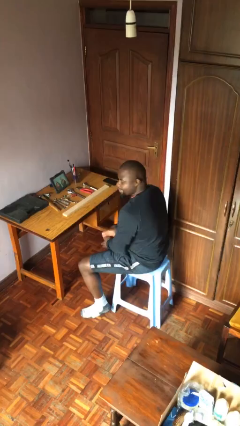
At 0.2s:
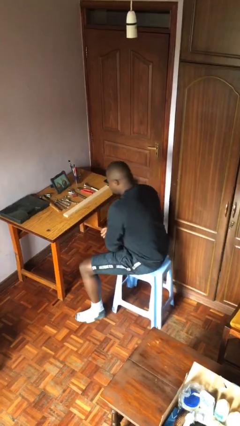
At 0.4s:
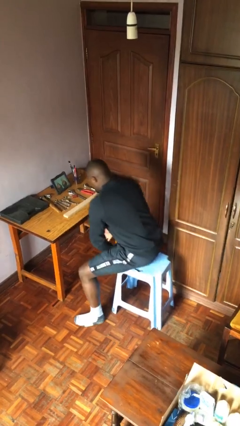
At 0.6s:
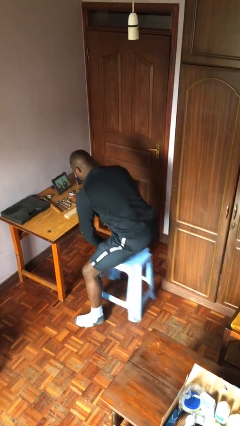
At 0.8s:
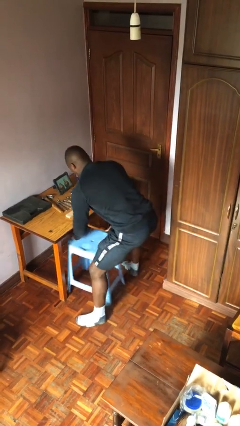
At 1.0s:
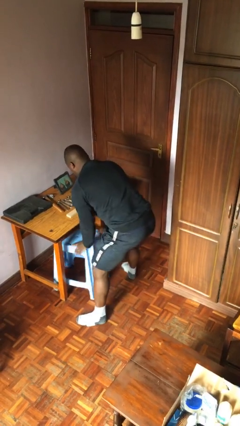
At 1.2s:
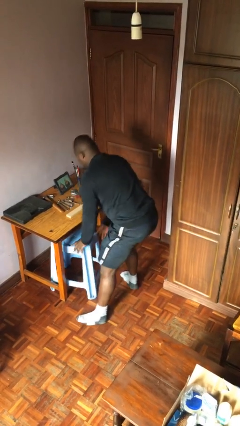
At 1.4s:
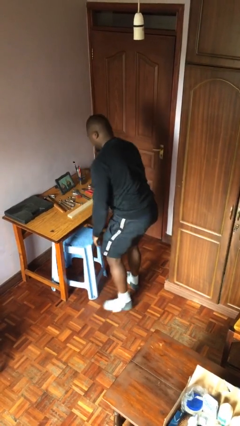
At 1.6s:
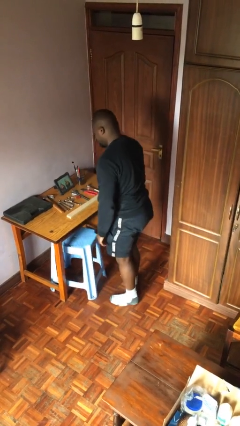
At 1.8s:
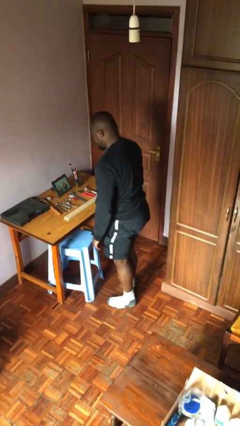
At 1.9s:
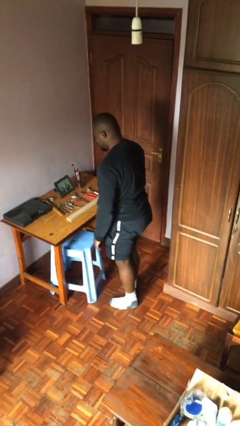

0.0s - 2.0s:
person stands up

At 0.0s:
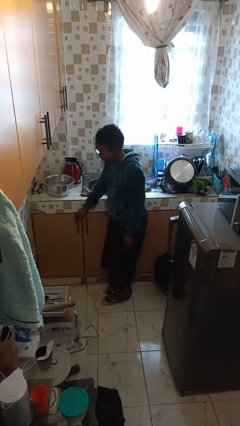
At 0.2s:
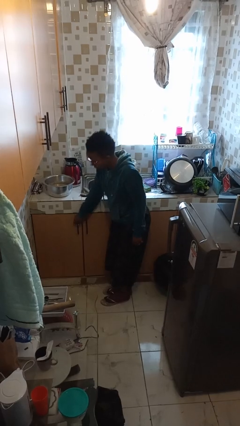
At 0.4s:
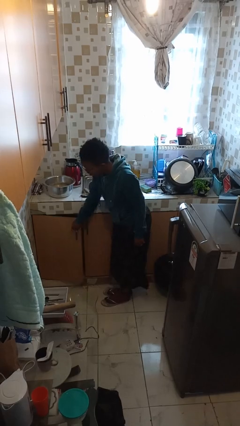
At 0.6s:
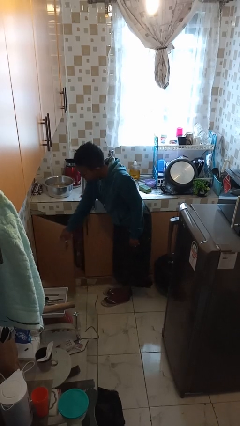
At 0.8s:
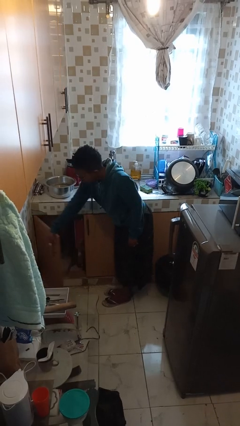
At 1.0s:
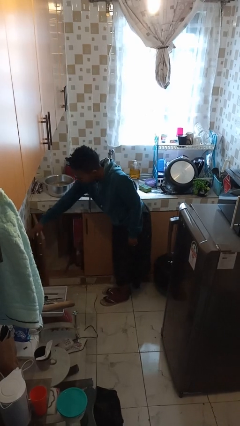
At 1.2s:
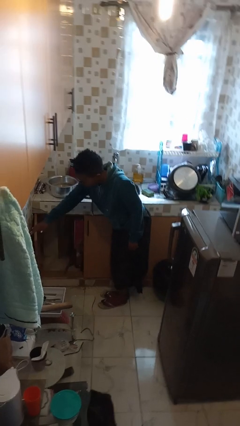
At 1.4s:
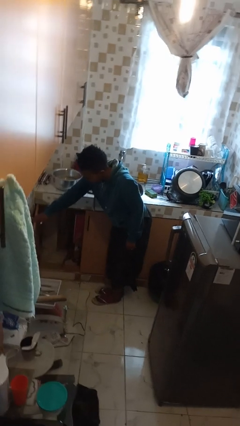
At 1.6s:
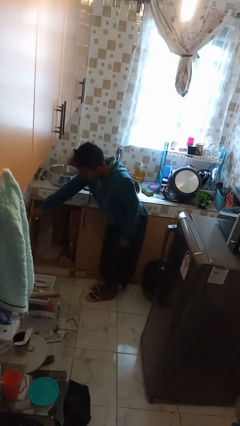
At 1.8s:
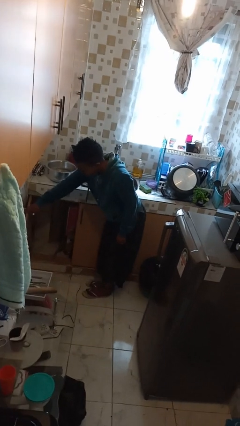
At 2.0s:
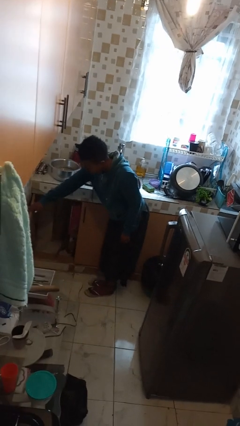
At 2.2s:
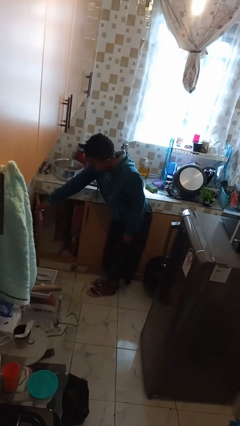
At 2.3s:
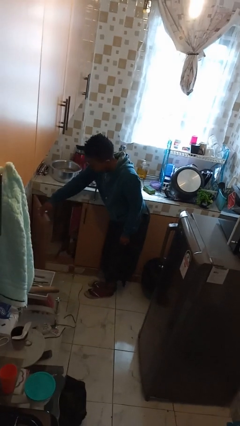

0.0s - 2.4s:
person opens cabinet

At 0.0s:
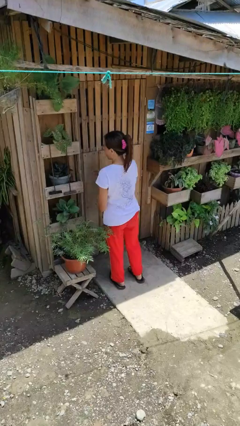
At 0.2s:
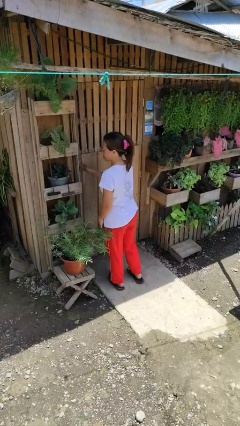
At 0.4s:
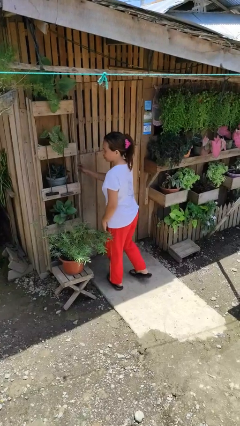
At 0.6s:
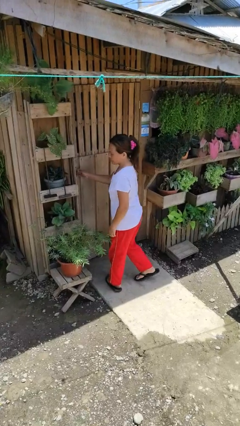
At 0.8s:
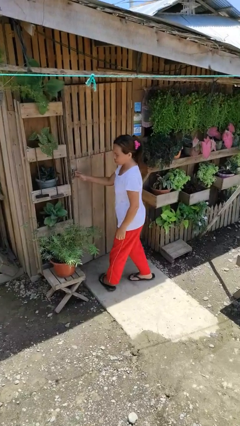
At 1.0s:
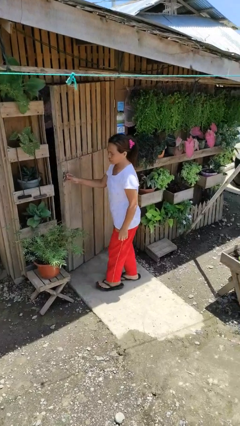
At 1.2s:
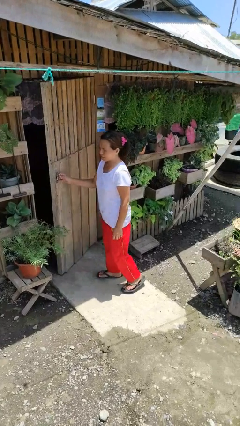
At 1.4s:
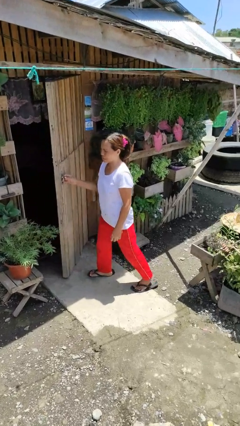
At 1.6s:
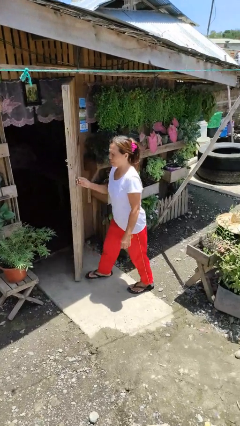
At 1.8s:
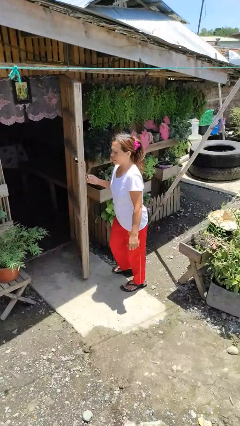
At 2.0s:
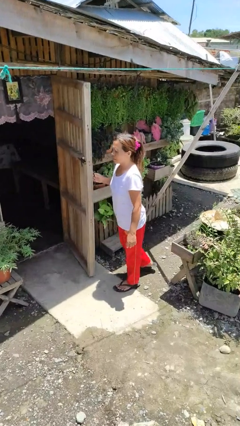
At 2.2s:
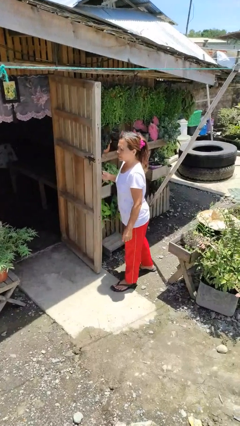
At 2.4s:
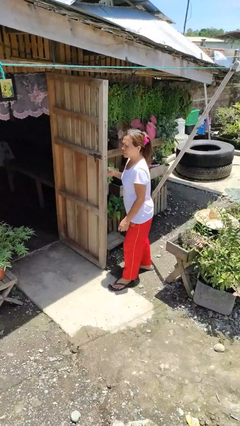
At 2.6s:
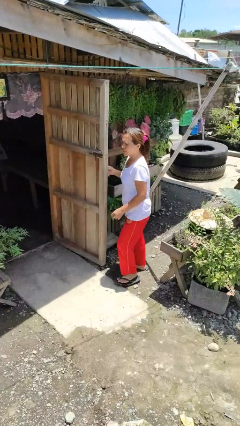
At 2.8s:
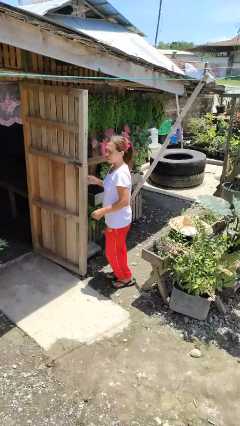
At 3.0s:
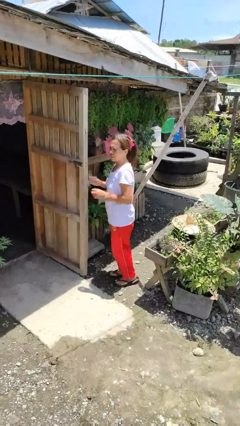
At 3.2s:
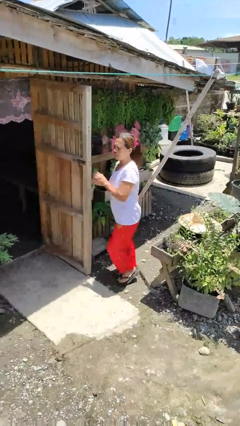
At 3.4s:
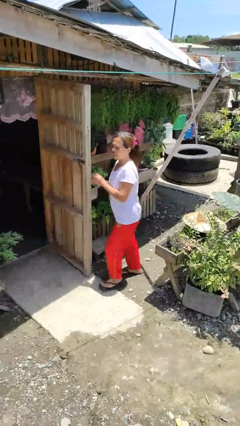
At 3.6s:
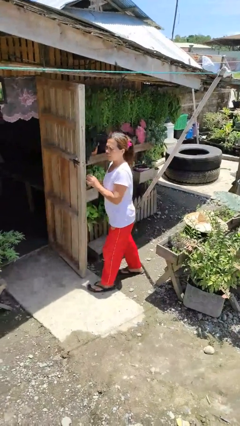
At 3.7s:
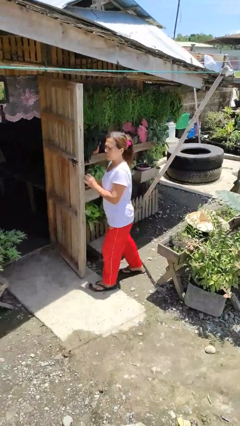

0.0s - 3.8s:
person opens facility door

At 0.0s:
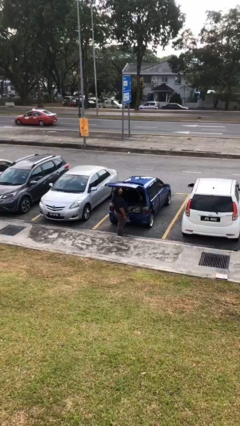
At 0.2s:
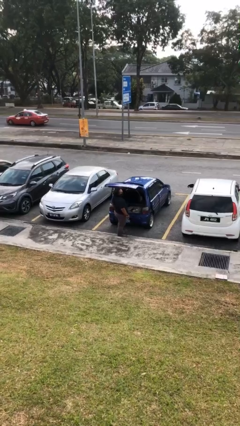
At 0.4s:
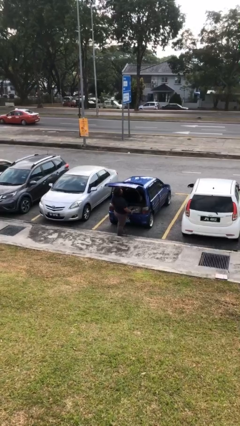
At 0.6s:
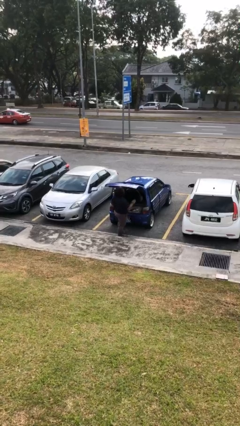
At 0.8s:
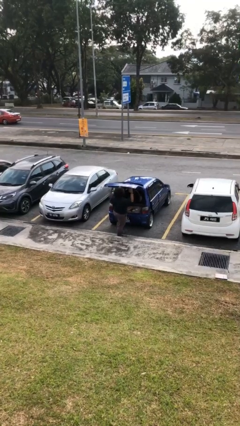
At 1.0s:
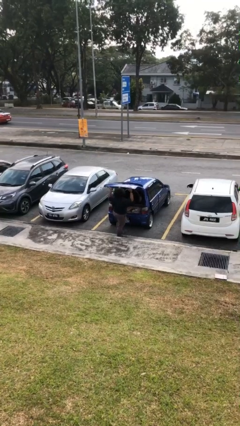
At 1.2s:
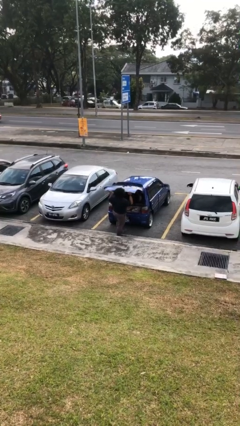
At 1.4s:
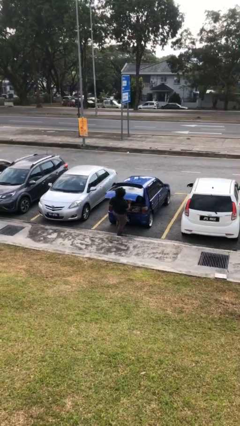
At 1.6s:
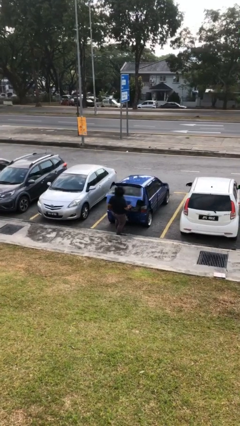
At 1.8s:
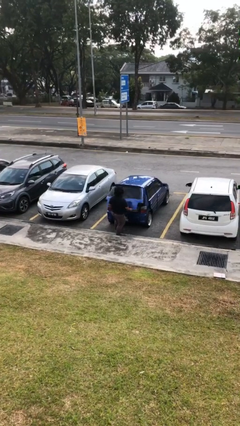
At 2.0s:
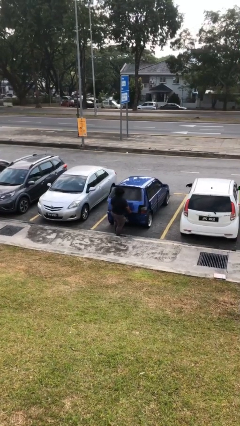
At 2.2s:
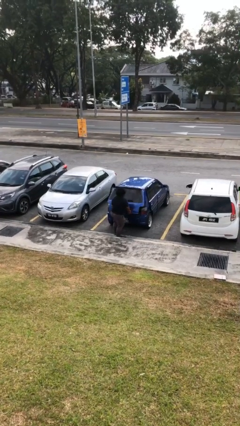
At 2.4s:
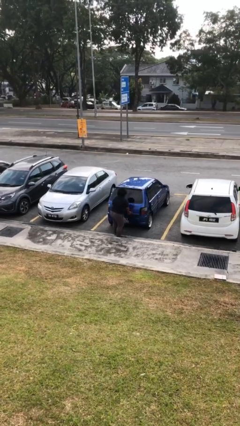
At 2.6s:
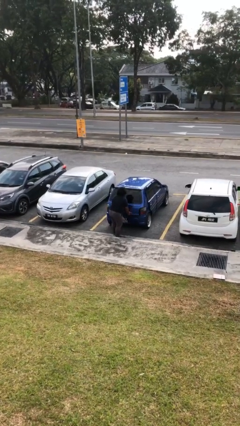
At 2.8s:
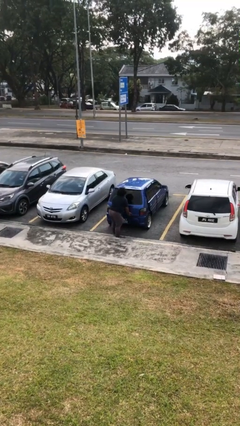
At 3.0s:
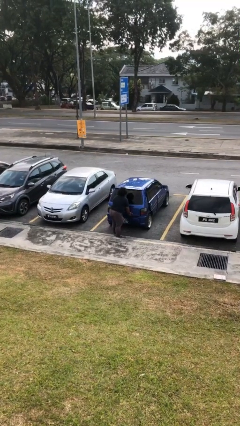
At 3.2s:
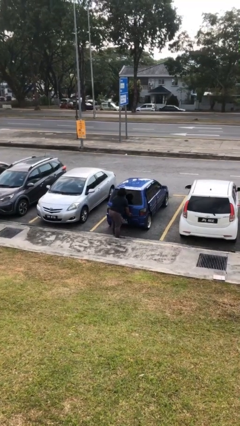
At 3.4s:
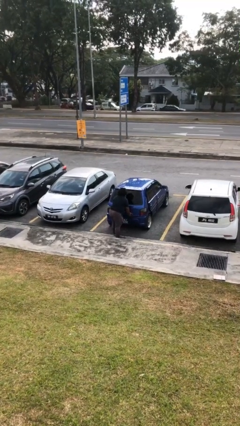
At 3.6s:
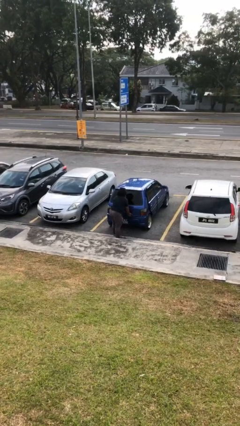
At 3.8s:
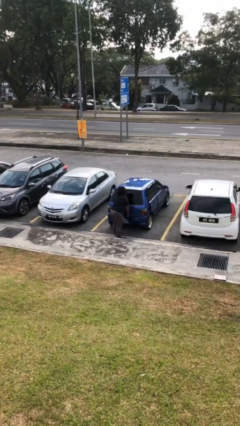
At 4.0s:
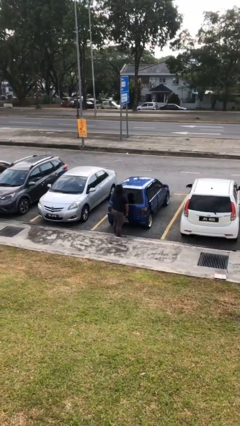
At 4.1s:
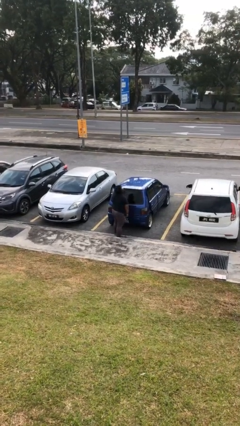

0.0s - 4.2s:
person closes car trunk

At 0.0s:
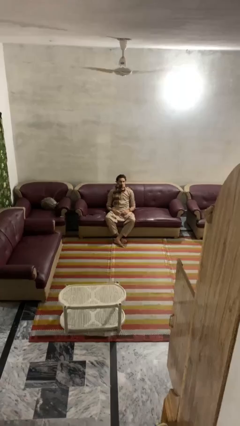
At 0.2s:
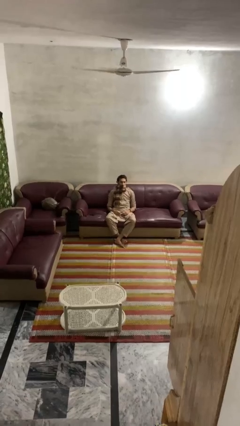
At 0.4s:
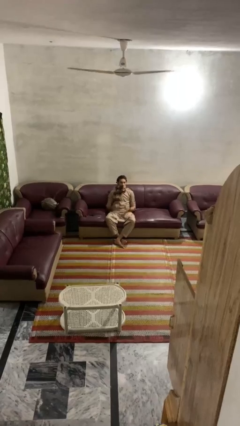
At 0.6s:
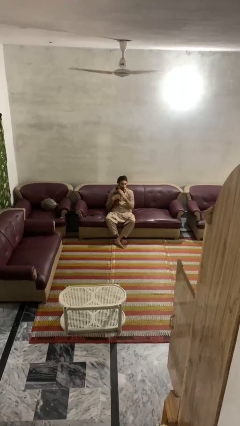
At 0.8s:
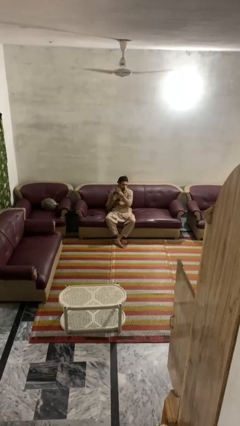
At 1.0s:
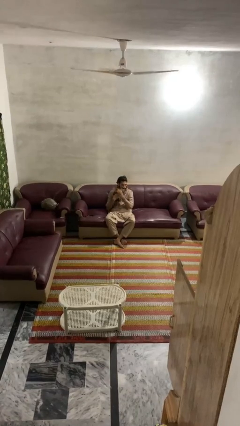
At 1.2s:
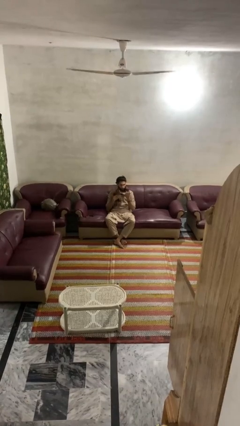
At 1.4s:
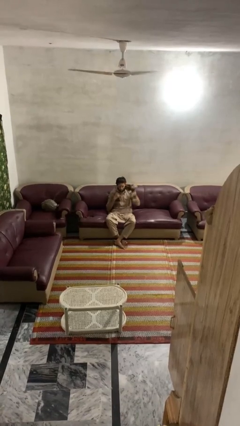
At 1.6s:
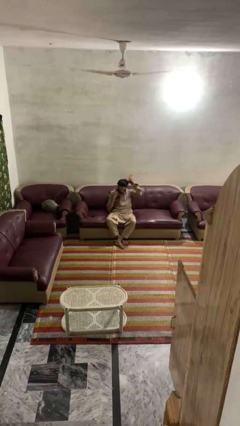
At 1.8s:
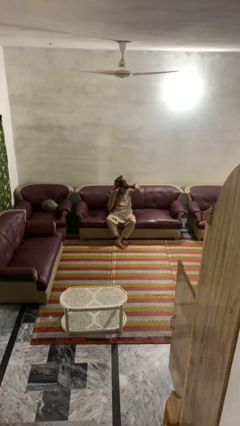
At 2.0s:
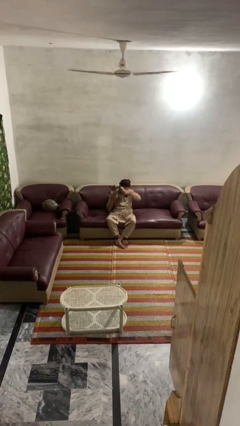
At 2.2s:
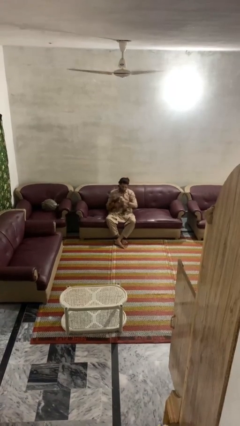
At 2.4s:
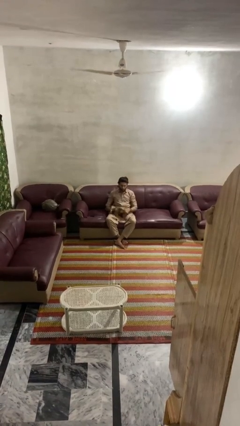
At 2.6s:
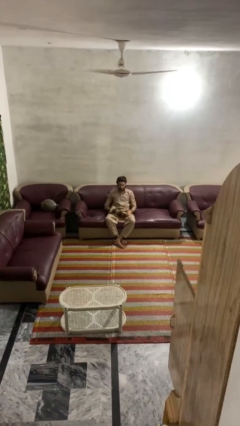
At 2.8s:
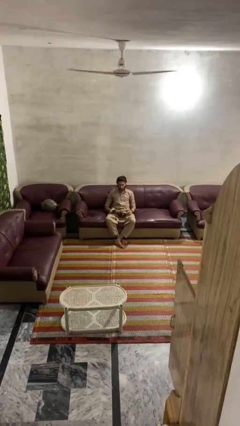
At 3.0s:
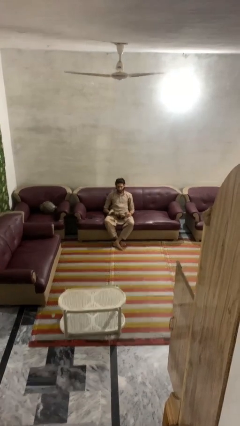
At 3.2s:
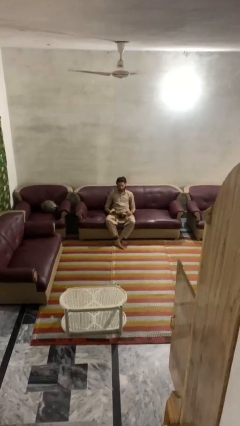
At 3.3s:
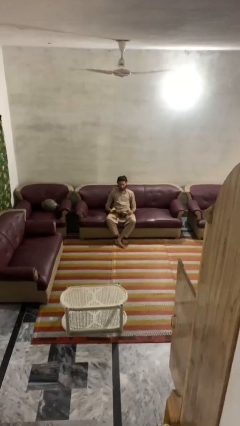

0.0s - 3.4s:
person takes off scarf

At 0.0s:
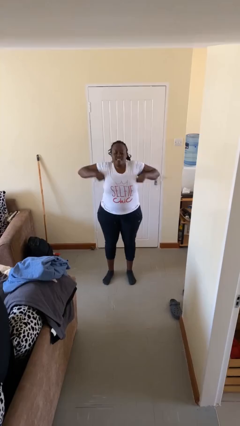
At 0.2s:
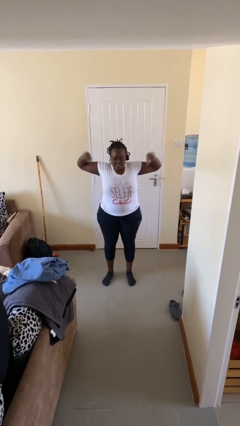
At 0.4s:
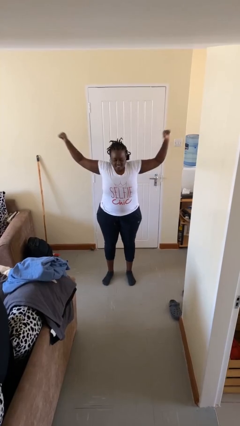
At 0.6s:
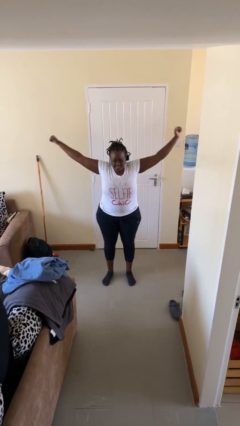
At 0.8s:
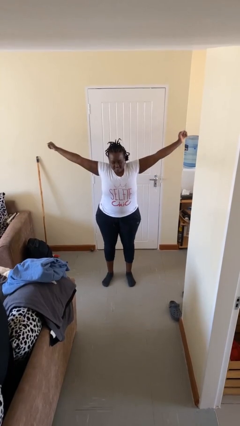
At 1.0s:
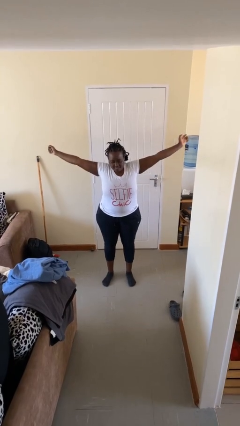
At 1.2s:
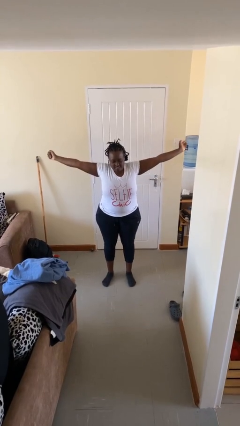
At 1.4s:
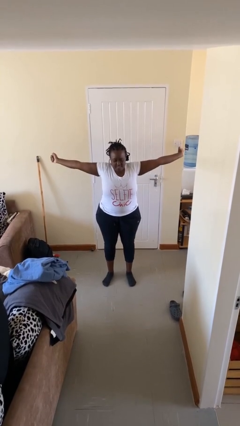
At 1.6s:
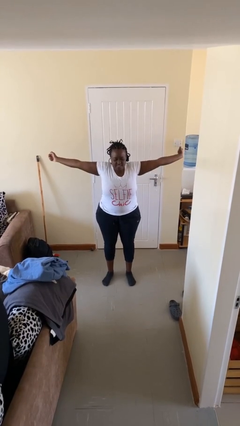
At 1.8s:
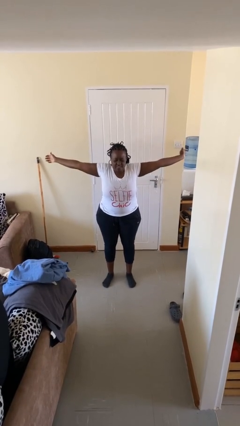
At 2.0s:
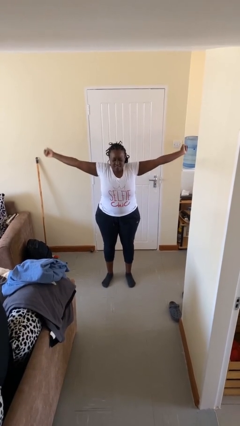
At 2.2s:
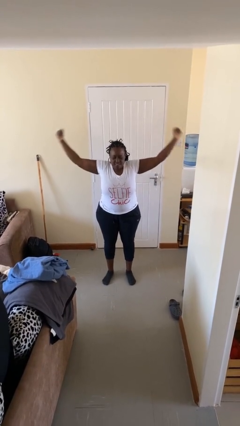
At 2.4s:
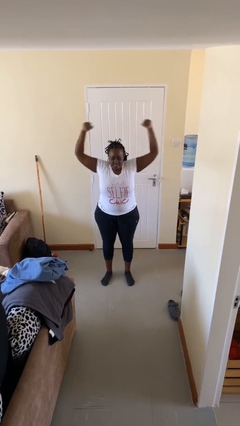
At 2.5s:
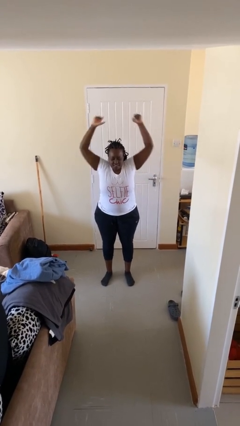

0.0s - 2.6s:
person stretches arms to side
